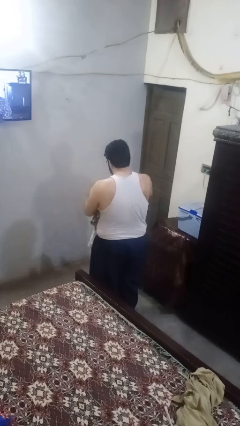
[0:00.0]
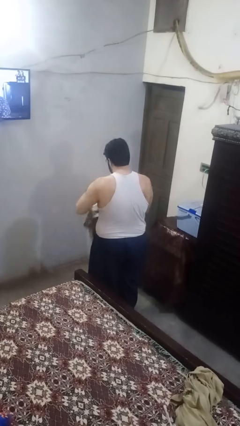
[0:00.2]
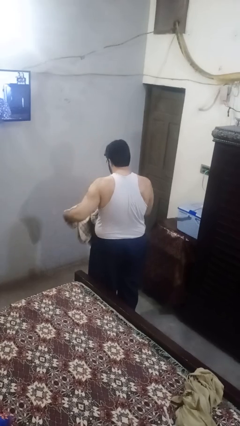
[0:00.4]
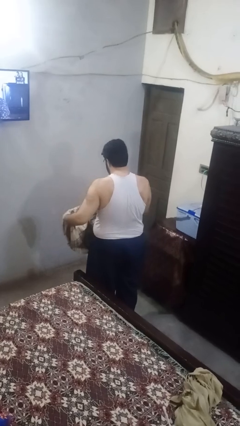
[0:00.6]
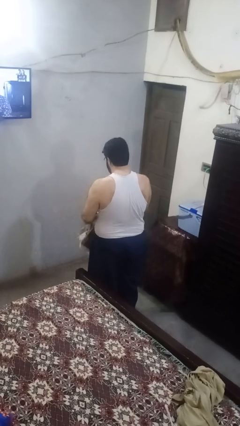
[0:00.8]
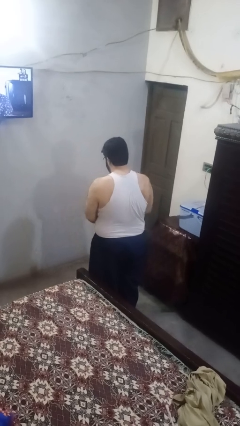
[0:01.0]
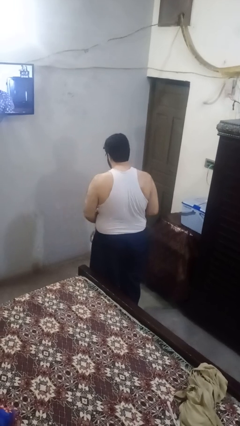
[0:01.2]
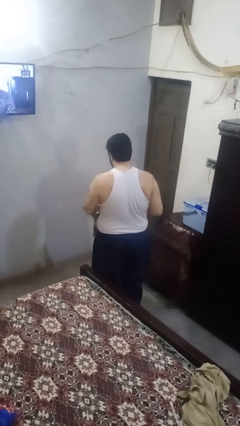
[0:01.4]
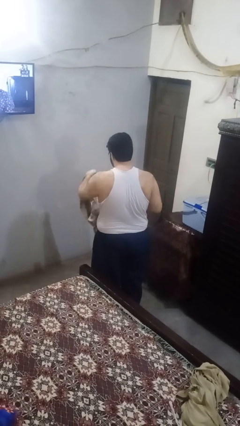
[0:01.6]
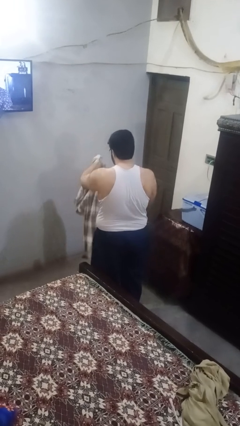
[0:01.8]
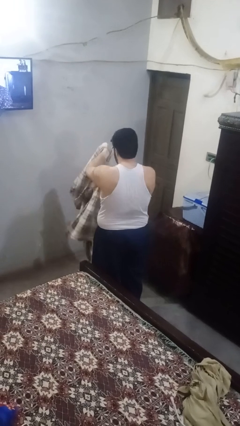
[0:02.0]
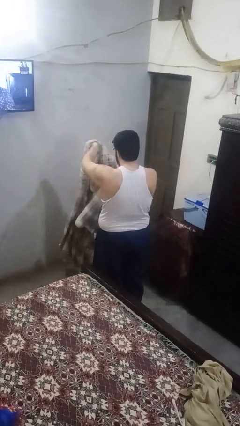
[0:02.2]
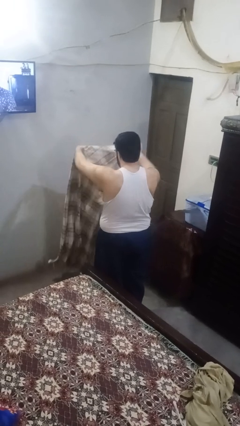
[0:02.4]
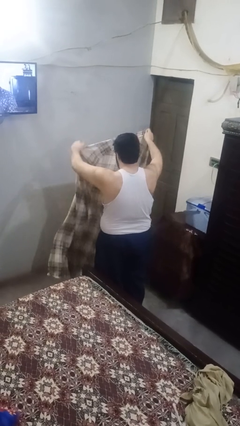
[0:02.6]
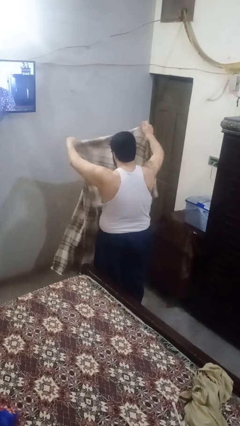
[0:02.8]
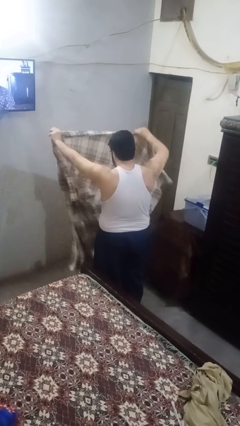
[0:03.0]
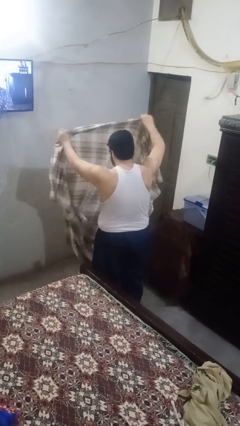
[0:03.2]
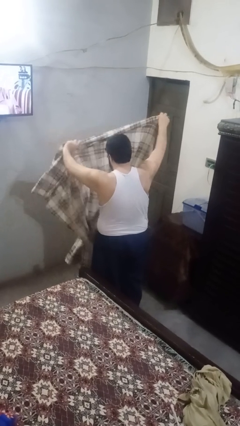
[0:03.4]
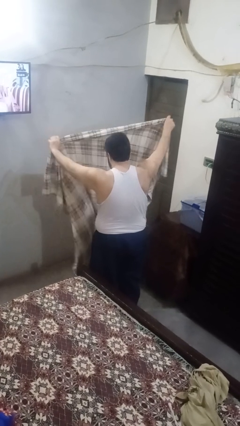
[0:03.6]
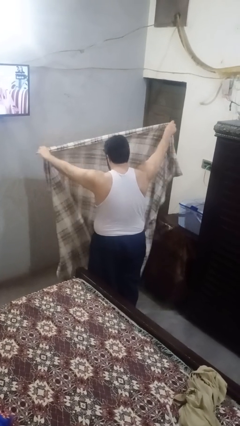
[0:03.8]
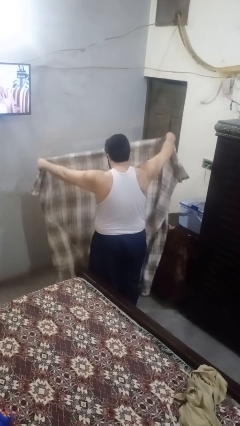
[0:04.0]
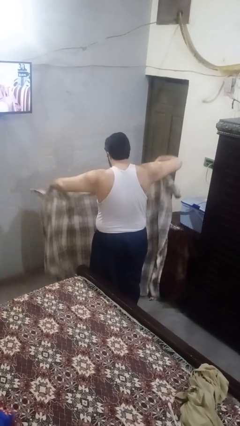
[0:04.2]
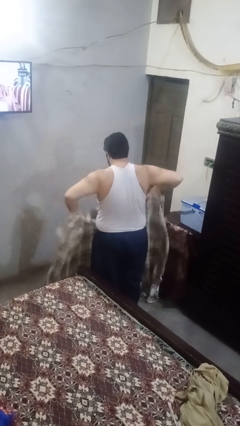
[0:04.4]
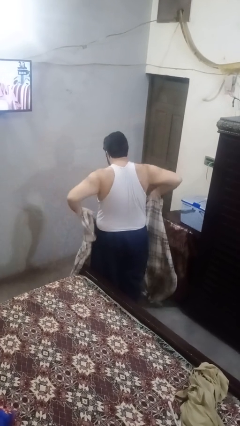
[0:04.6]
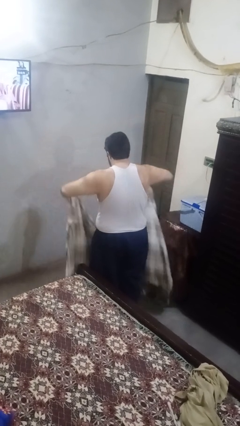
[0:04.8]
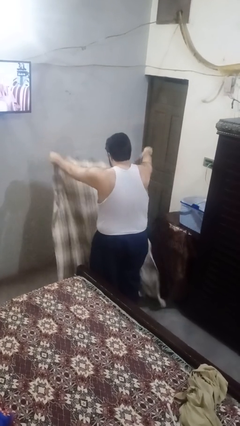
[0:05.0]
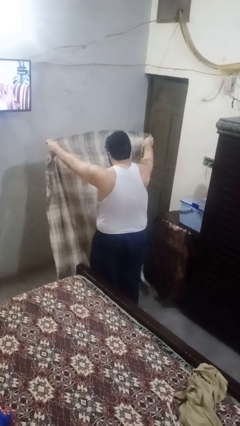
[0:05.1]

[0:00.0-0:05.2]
person unfolds blanket

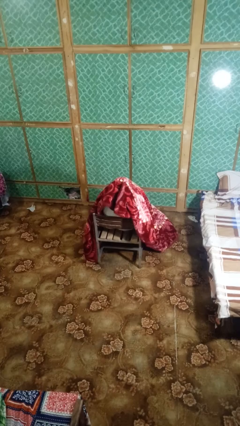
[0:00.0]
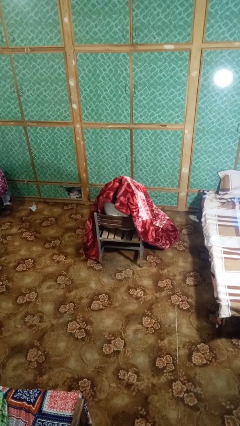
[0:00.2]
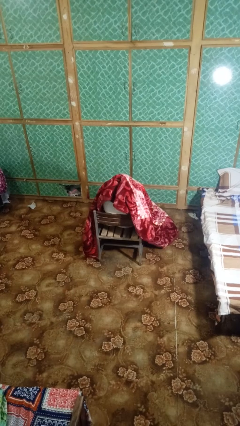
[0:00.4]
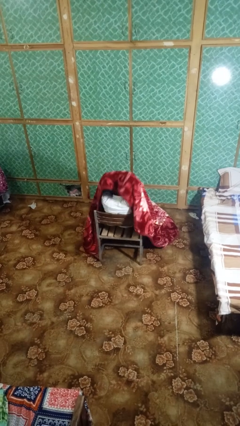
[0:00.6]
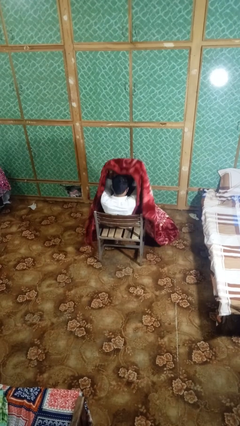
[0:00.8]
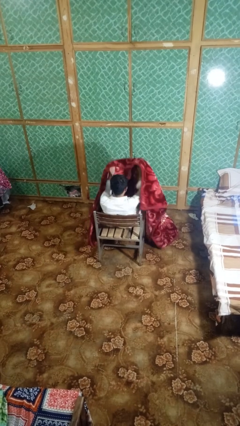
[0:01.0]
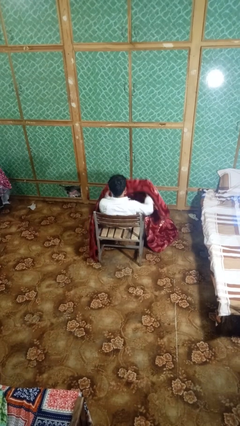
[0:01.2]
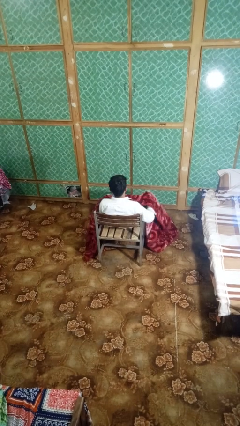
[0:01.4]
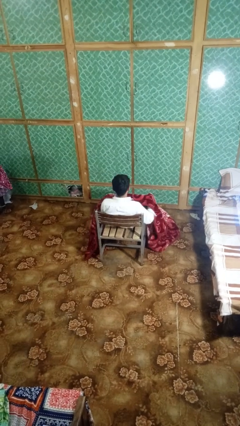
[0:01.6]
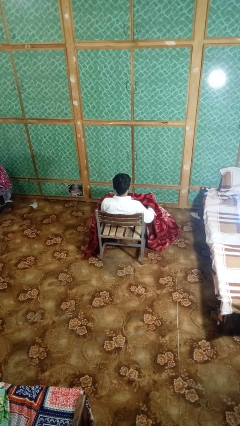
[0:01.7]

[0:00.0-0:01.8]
person uncovers with blanket

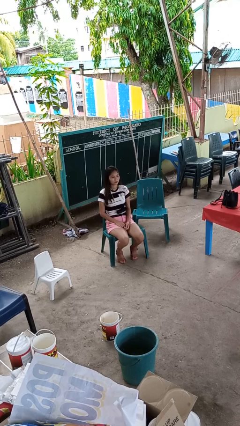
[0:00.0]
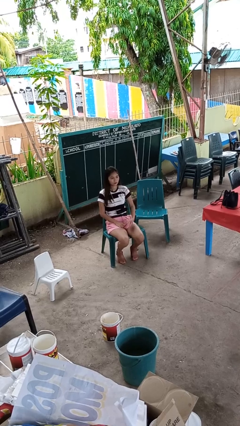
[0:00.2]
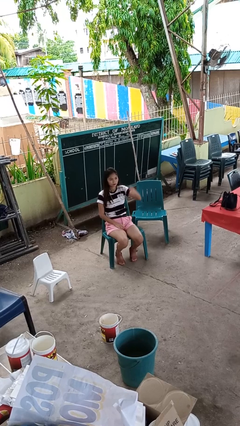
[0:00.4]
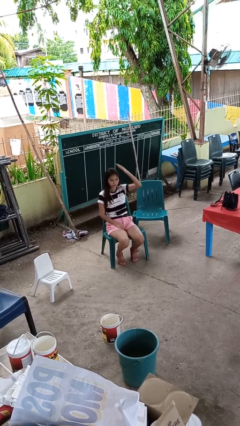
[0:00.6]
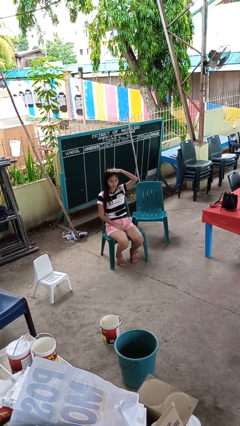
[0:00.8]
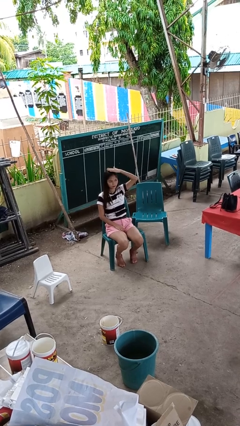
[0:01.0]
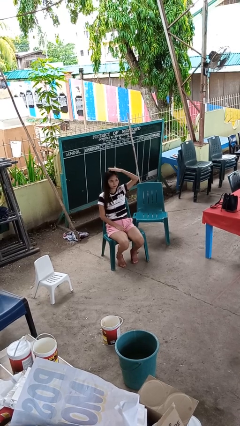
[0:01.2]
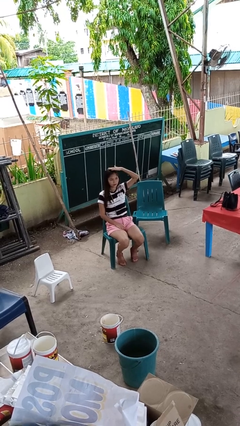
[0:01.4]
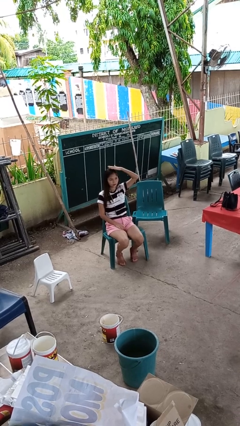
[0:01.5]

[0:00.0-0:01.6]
person pats head

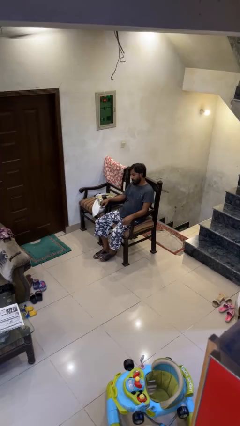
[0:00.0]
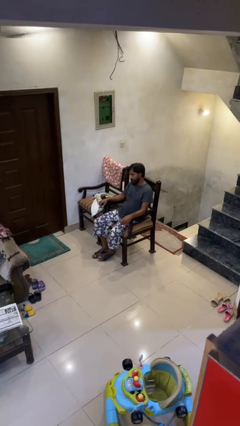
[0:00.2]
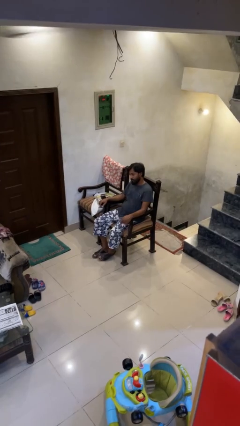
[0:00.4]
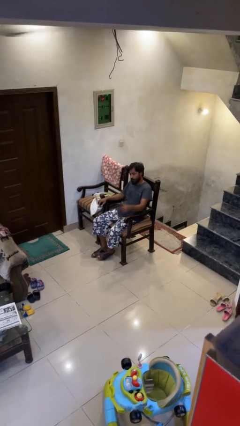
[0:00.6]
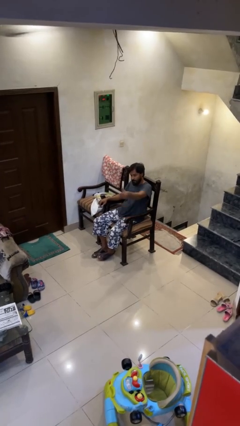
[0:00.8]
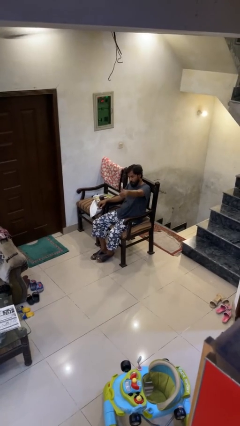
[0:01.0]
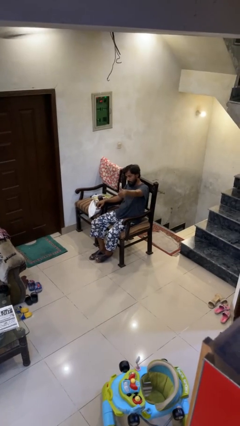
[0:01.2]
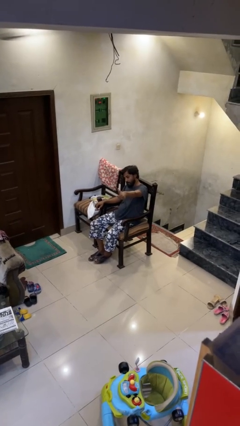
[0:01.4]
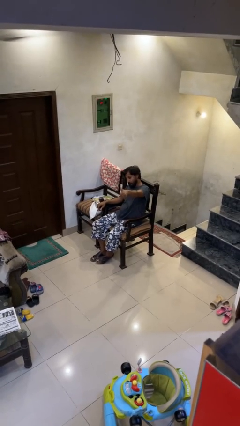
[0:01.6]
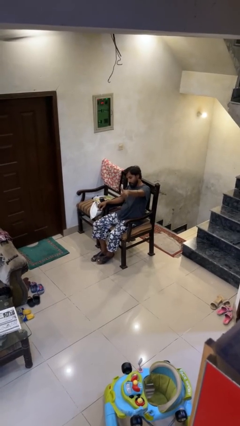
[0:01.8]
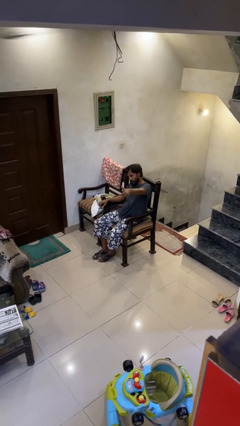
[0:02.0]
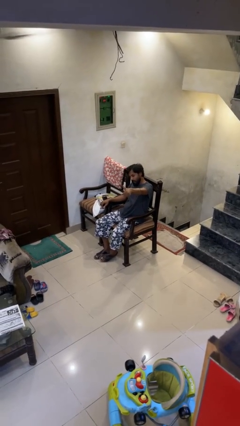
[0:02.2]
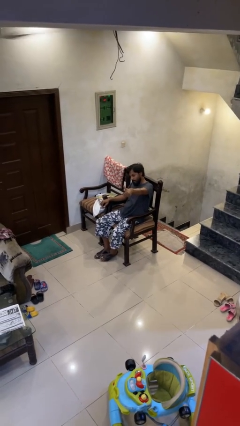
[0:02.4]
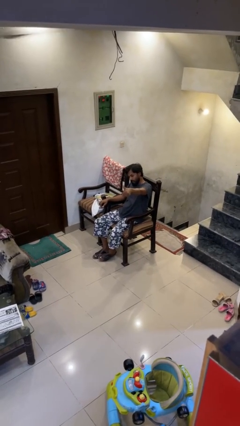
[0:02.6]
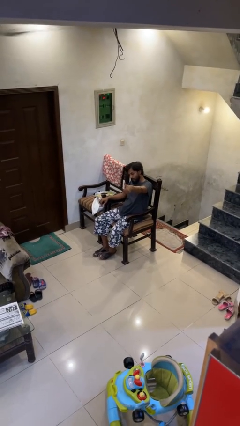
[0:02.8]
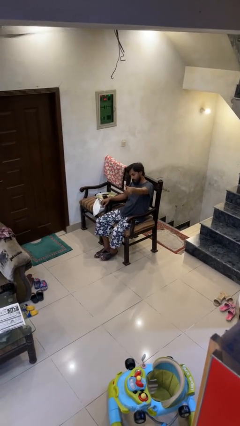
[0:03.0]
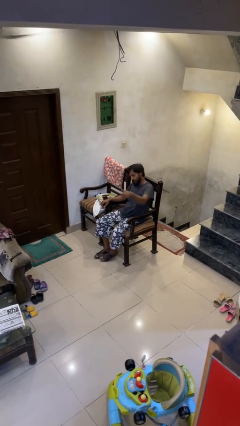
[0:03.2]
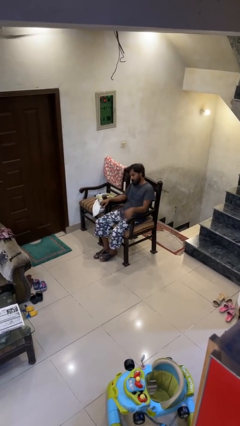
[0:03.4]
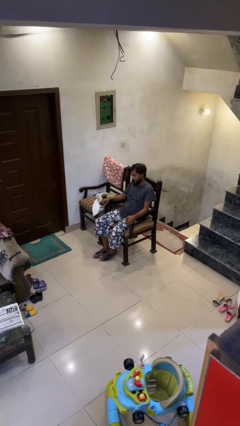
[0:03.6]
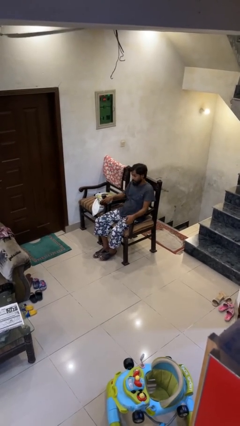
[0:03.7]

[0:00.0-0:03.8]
person gestures thumbs up

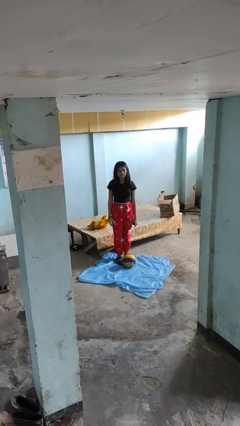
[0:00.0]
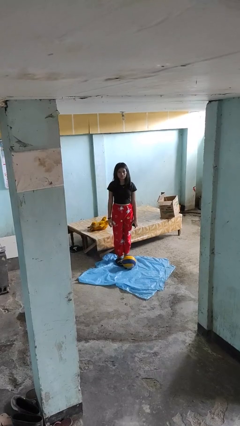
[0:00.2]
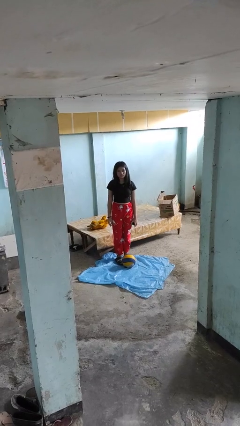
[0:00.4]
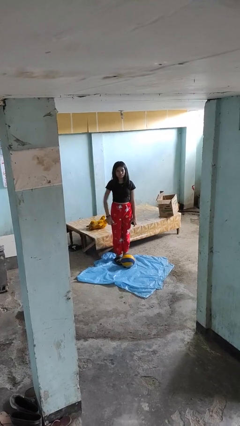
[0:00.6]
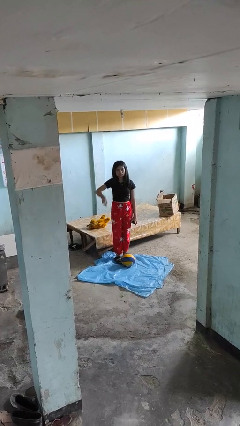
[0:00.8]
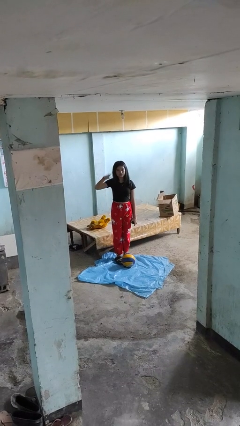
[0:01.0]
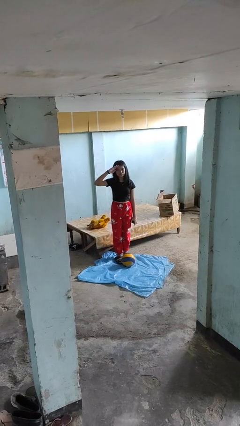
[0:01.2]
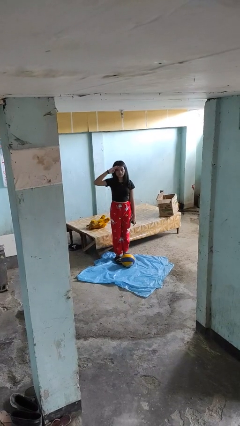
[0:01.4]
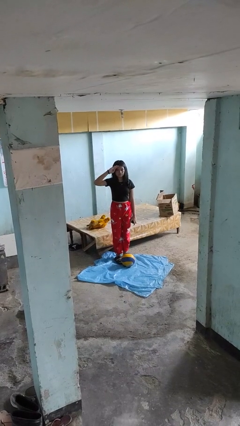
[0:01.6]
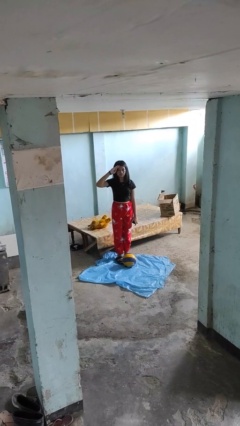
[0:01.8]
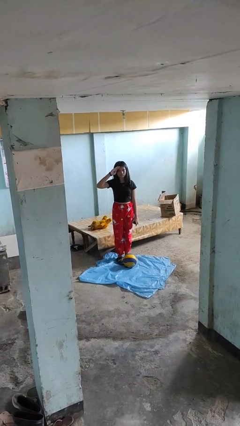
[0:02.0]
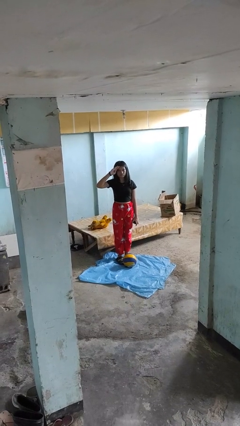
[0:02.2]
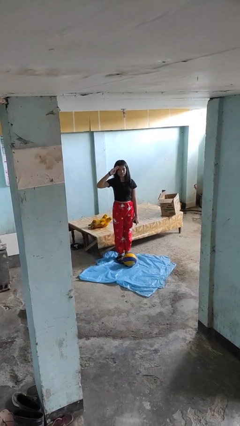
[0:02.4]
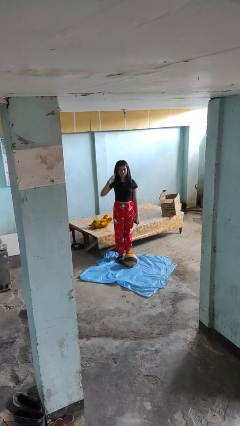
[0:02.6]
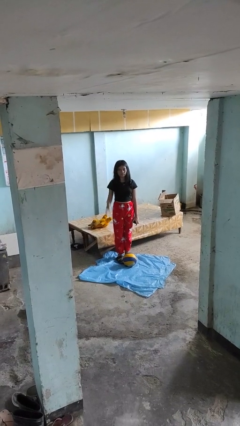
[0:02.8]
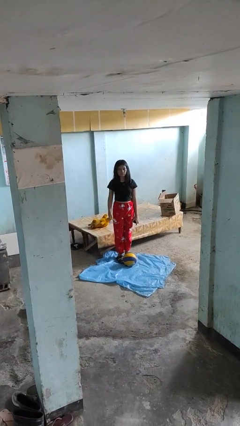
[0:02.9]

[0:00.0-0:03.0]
person salutes

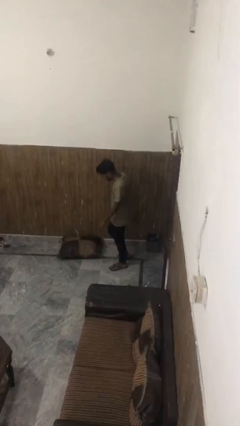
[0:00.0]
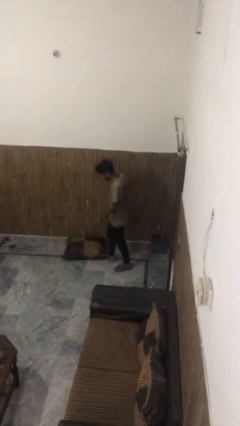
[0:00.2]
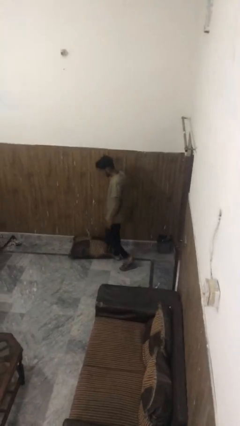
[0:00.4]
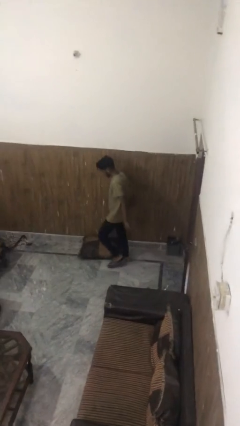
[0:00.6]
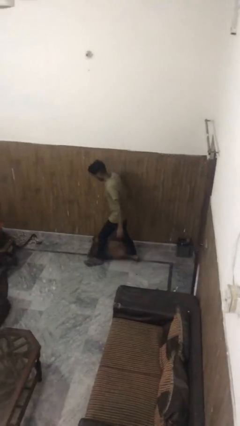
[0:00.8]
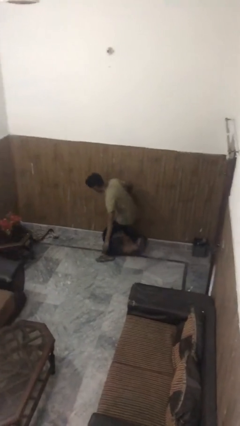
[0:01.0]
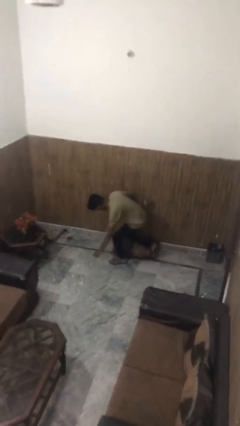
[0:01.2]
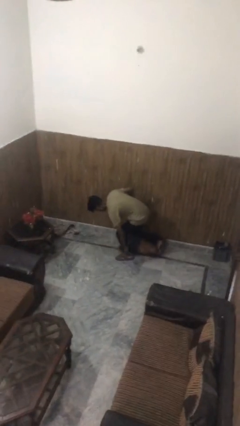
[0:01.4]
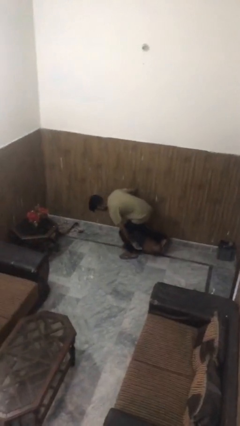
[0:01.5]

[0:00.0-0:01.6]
person trips on object on floor

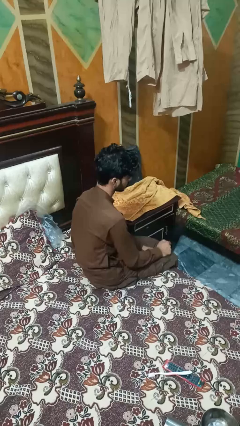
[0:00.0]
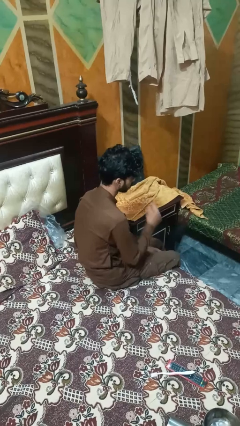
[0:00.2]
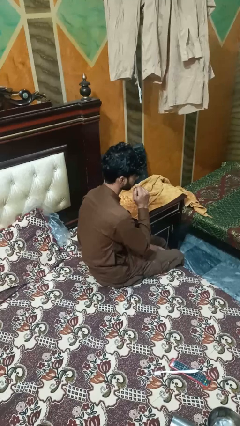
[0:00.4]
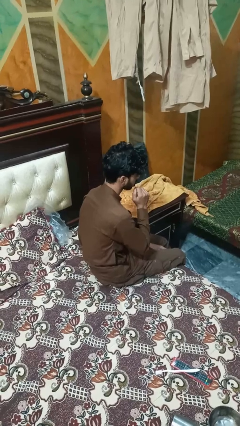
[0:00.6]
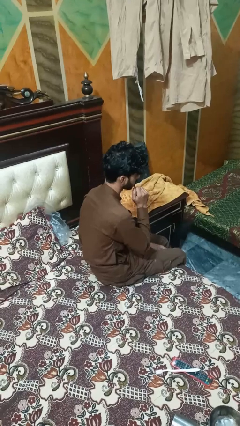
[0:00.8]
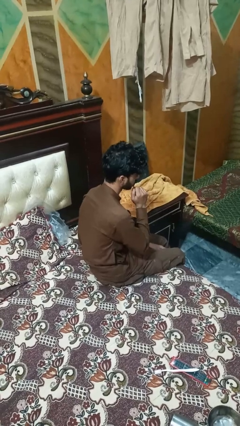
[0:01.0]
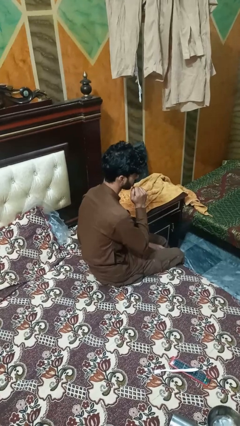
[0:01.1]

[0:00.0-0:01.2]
person flosses
